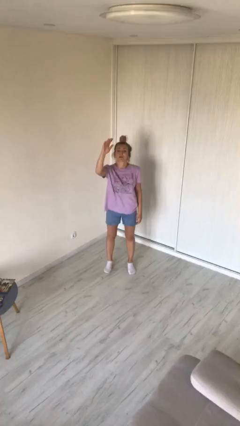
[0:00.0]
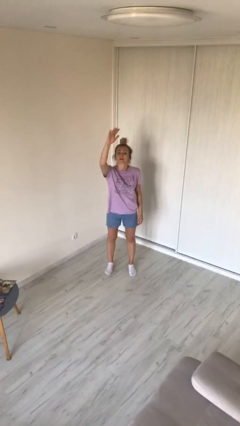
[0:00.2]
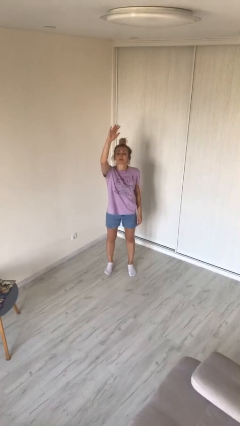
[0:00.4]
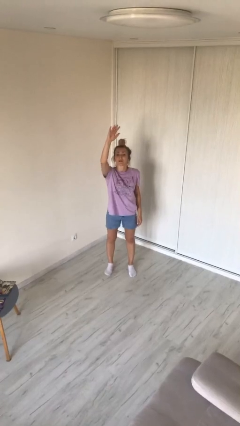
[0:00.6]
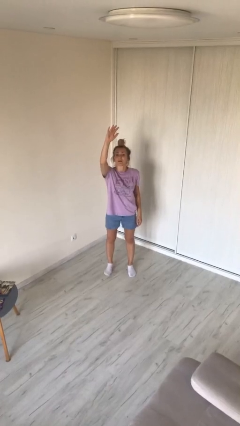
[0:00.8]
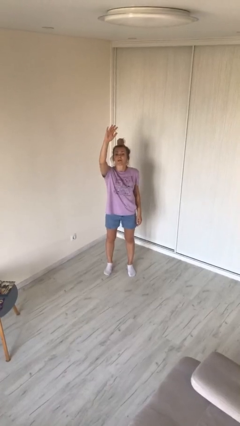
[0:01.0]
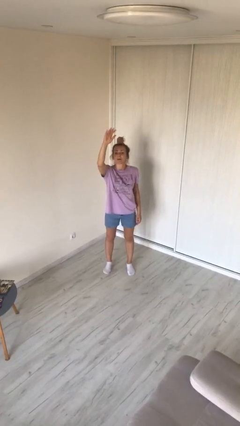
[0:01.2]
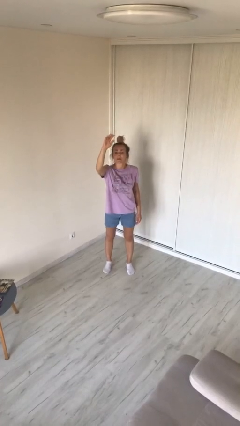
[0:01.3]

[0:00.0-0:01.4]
person gestures raise hand

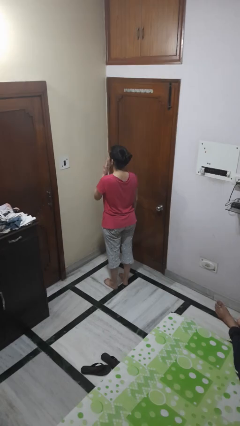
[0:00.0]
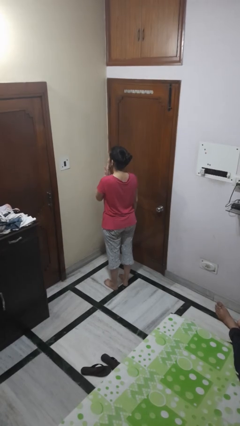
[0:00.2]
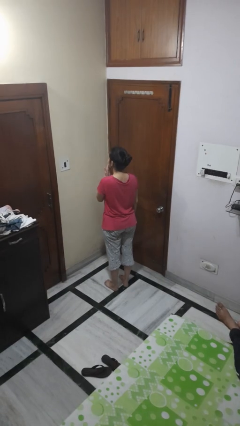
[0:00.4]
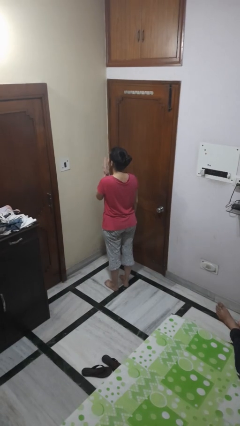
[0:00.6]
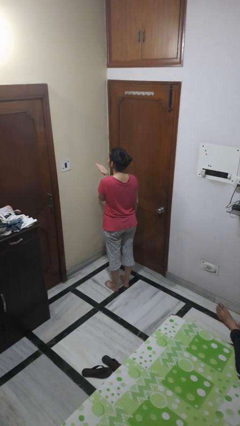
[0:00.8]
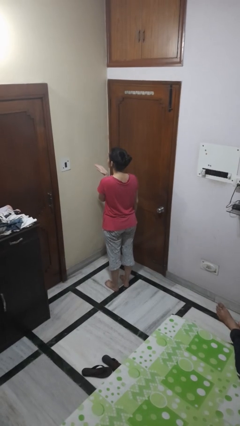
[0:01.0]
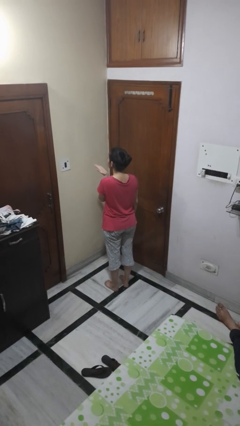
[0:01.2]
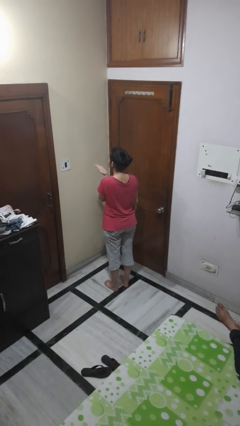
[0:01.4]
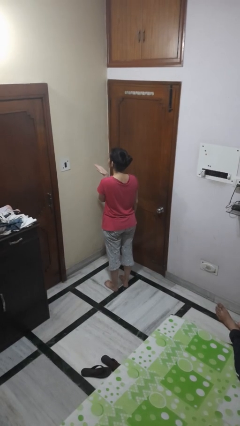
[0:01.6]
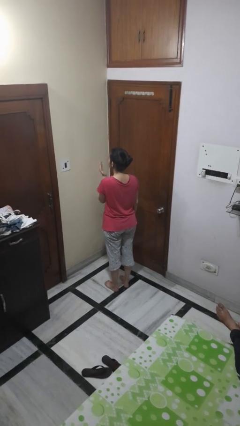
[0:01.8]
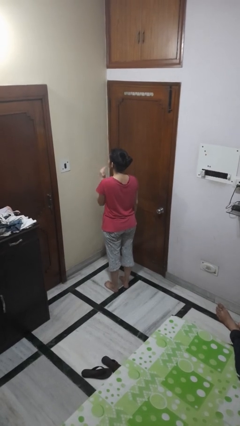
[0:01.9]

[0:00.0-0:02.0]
person gestures blow kiss

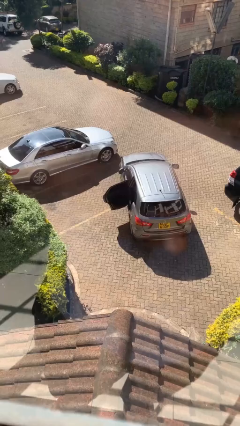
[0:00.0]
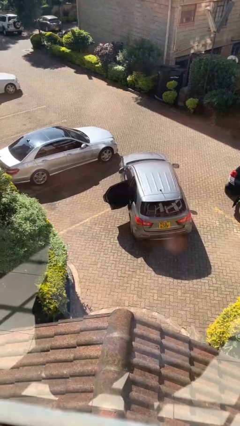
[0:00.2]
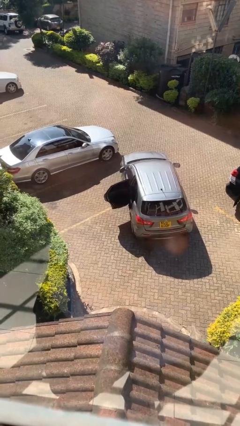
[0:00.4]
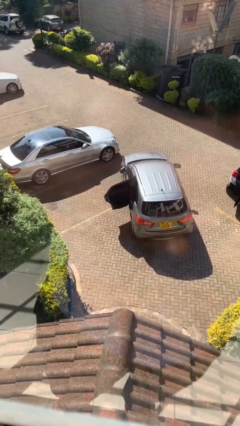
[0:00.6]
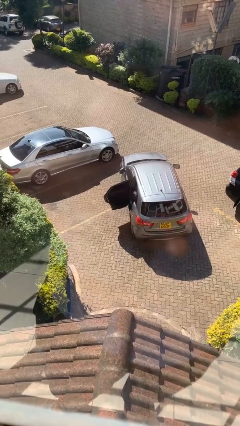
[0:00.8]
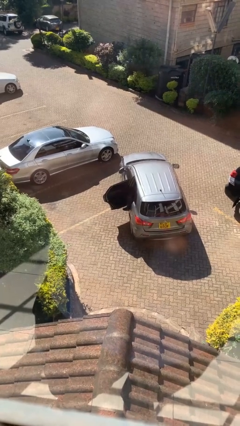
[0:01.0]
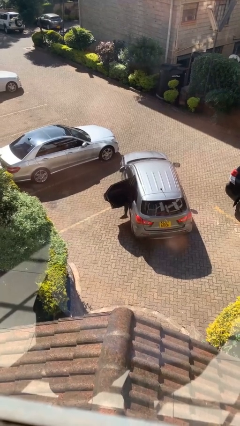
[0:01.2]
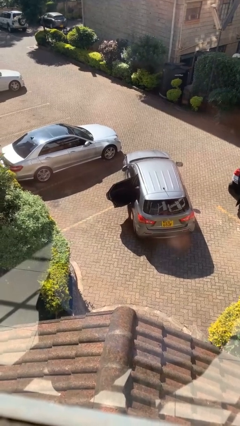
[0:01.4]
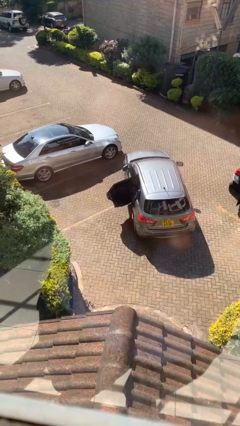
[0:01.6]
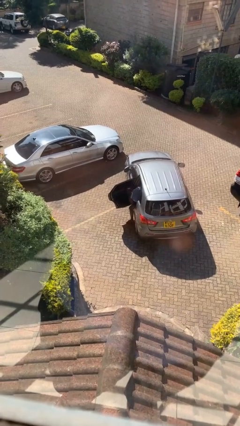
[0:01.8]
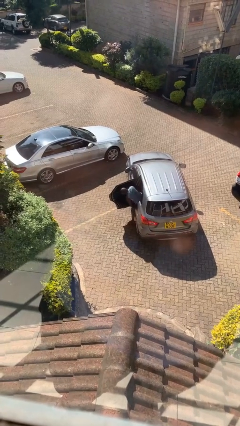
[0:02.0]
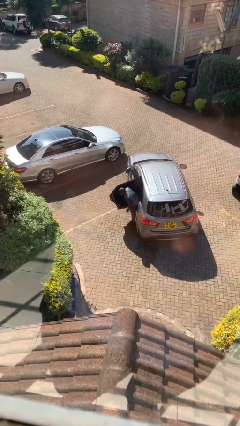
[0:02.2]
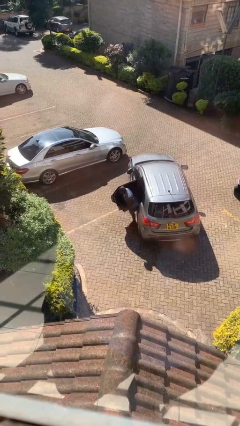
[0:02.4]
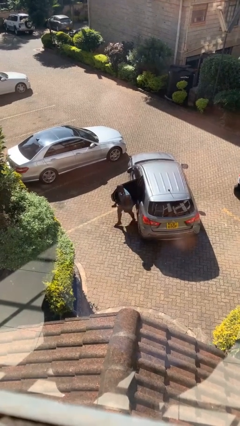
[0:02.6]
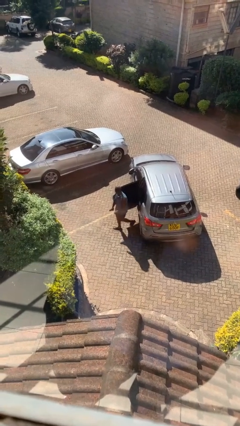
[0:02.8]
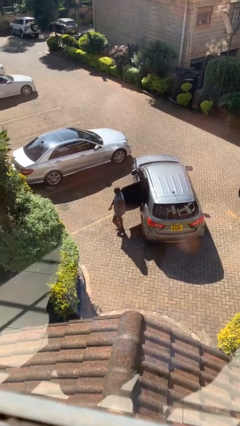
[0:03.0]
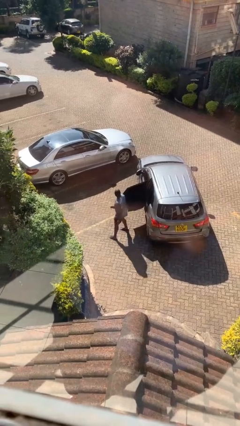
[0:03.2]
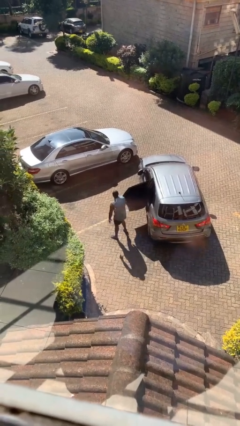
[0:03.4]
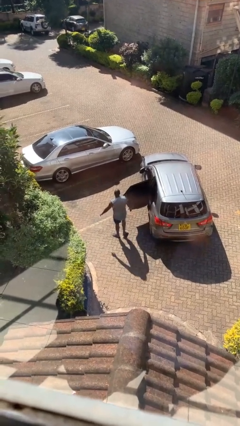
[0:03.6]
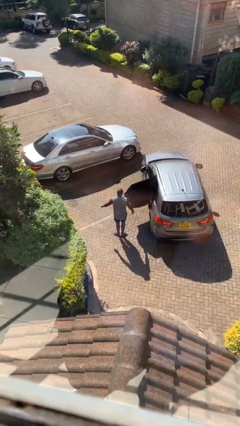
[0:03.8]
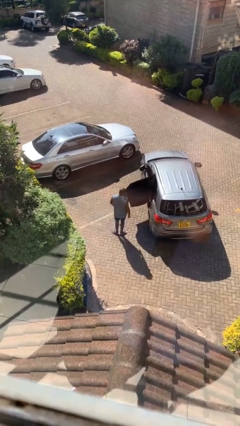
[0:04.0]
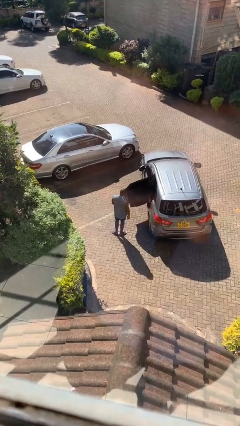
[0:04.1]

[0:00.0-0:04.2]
person exits car

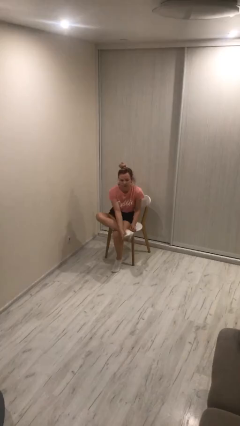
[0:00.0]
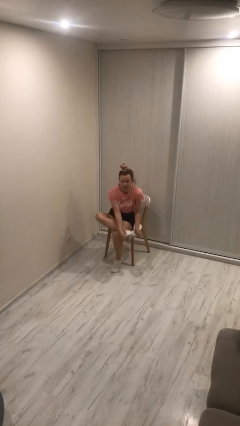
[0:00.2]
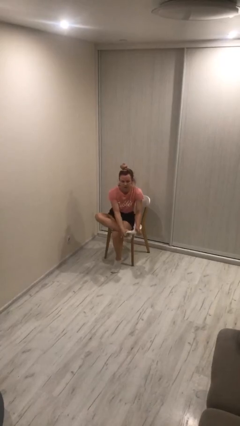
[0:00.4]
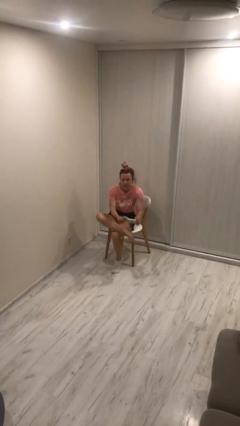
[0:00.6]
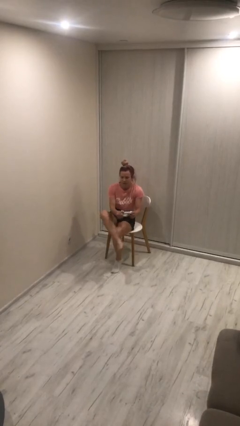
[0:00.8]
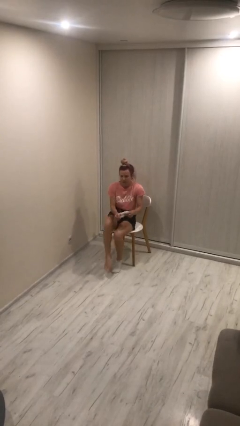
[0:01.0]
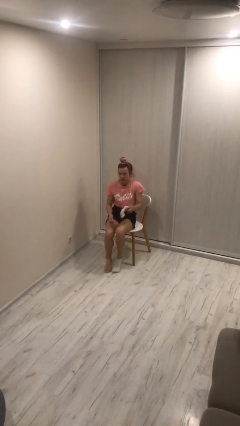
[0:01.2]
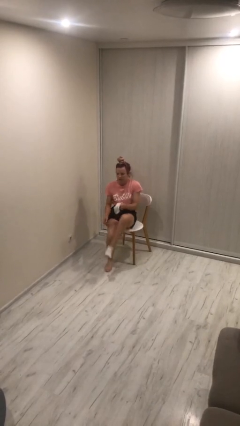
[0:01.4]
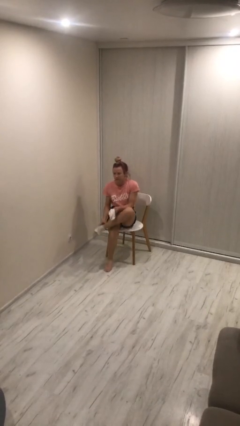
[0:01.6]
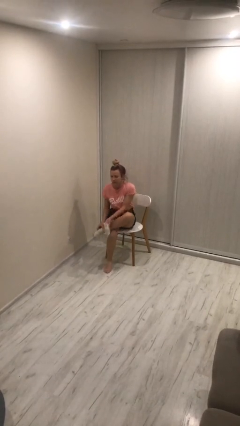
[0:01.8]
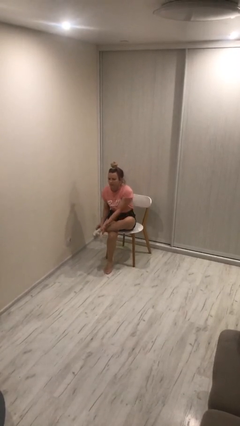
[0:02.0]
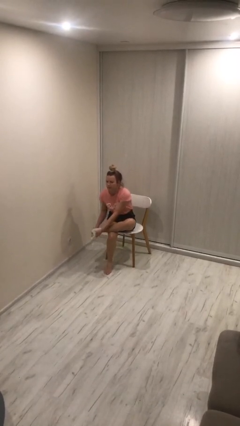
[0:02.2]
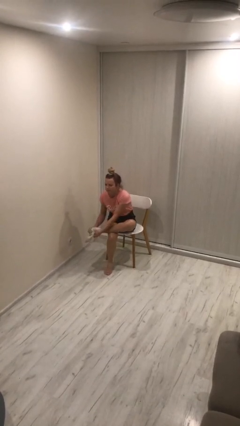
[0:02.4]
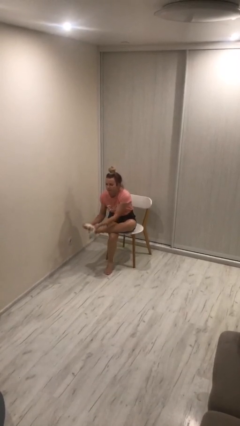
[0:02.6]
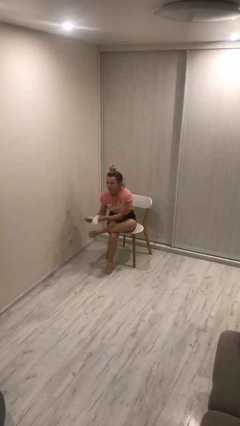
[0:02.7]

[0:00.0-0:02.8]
person takes off socks

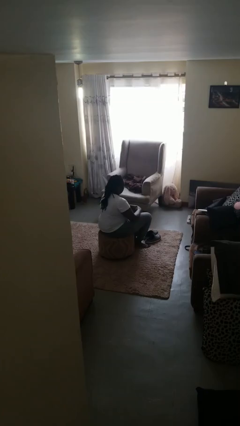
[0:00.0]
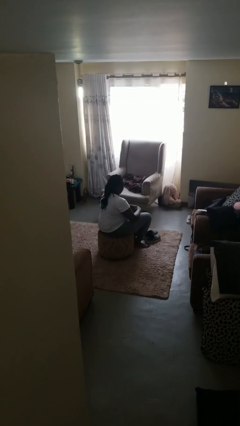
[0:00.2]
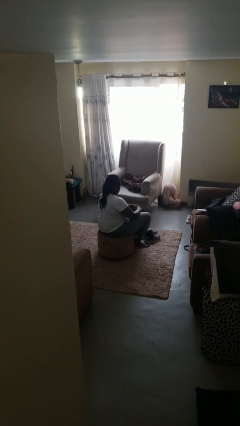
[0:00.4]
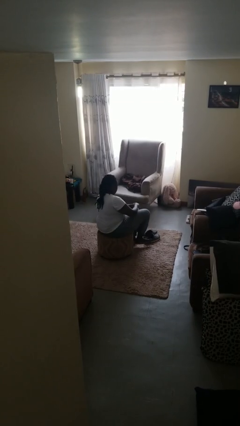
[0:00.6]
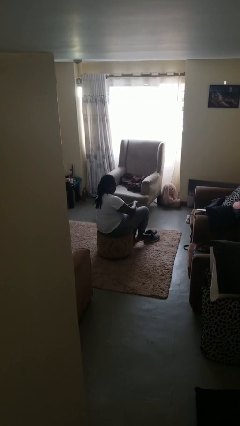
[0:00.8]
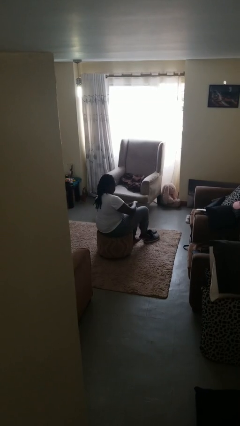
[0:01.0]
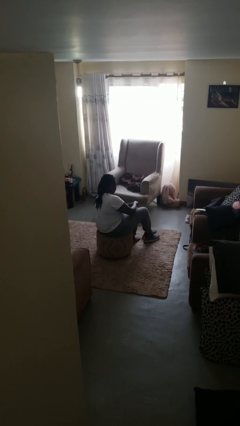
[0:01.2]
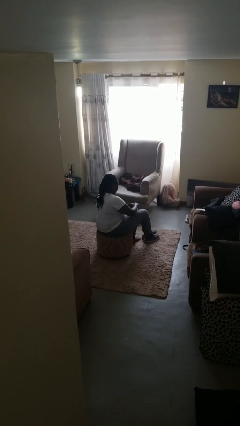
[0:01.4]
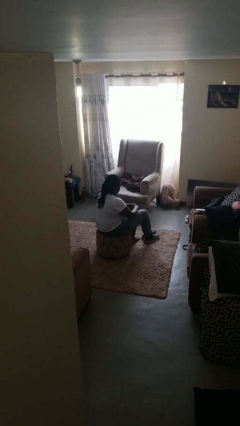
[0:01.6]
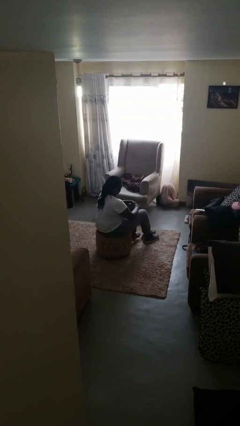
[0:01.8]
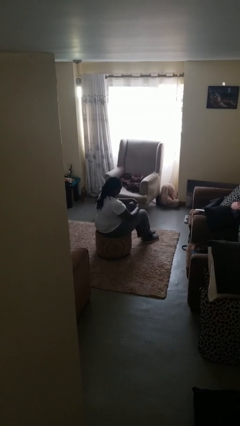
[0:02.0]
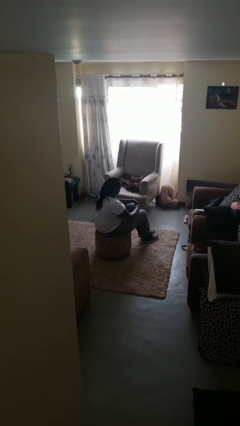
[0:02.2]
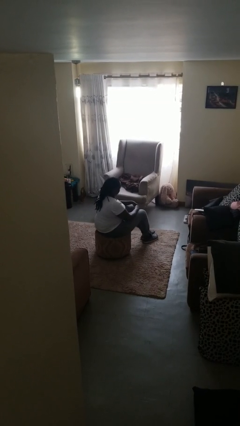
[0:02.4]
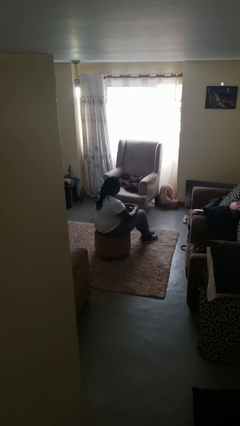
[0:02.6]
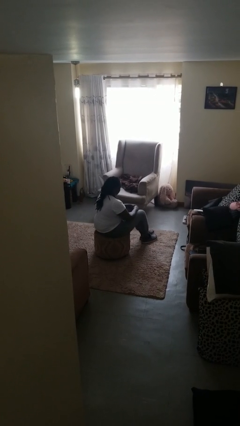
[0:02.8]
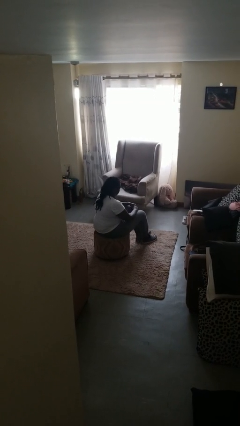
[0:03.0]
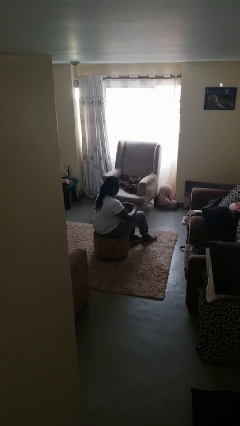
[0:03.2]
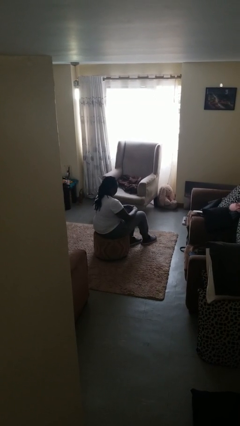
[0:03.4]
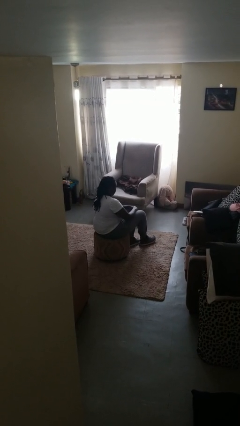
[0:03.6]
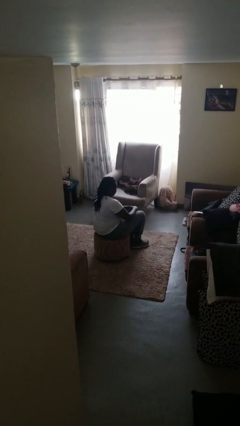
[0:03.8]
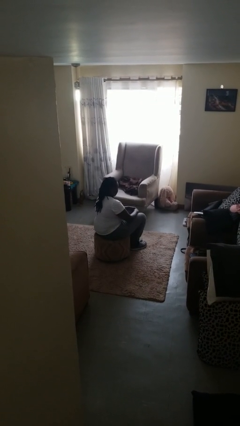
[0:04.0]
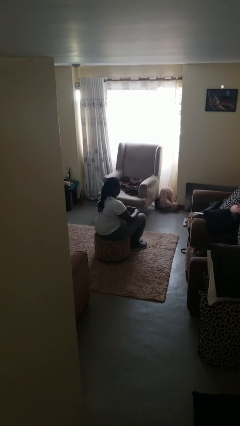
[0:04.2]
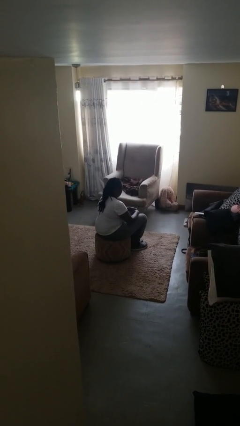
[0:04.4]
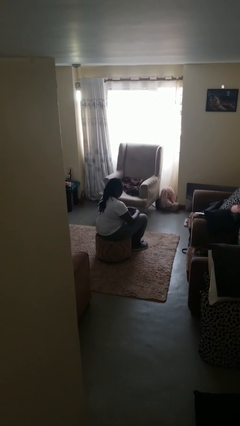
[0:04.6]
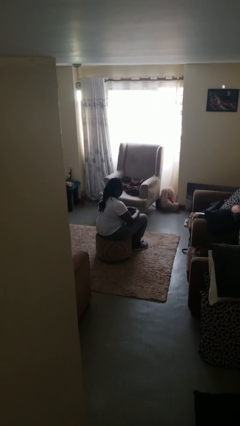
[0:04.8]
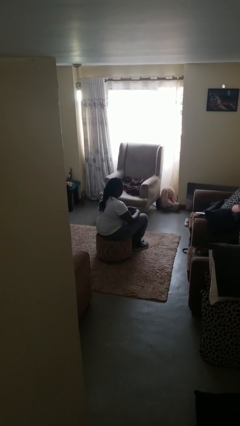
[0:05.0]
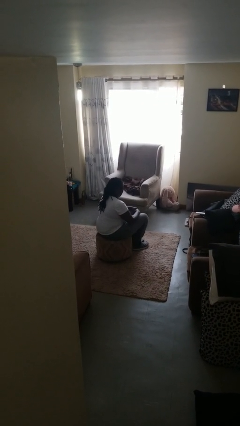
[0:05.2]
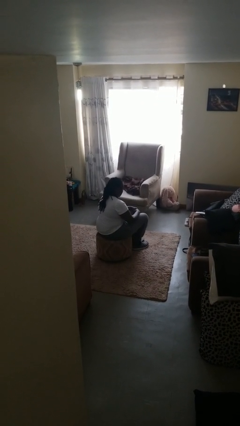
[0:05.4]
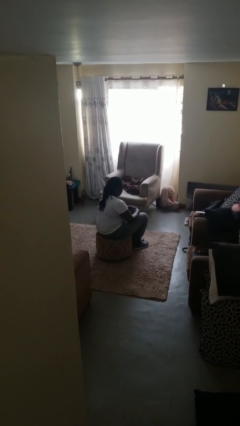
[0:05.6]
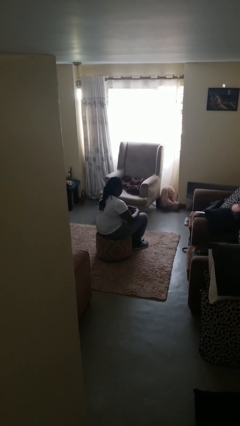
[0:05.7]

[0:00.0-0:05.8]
person puts on shoes

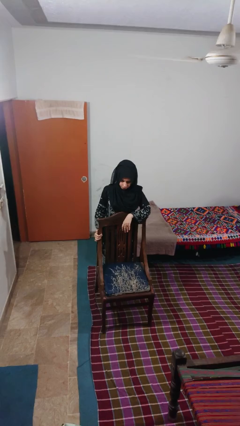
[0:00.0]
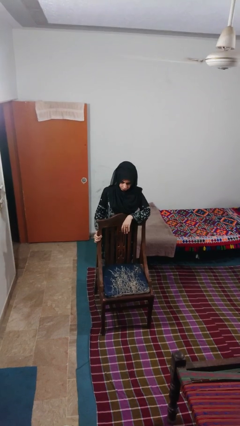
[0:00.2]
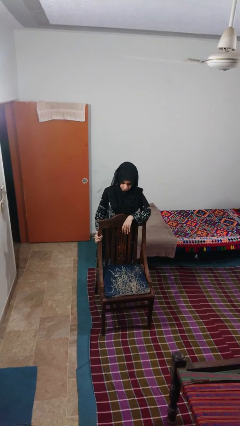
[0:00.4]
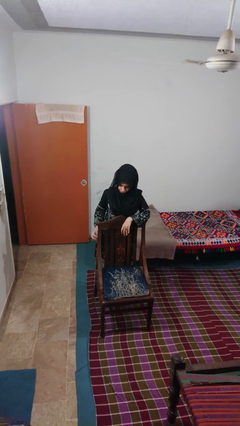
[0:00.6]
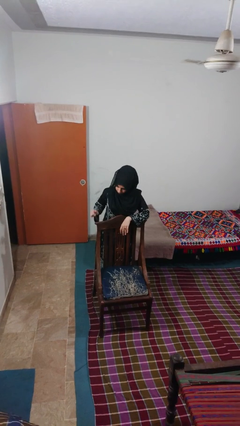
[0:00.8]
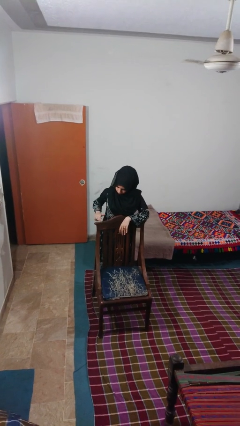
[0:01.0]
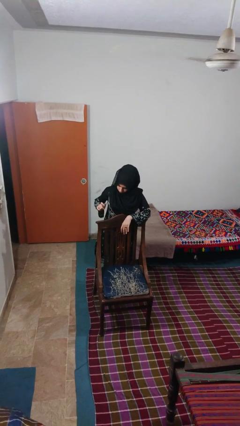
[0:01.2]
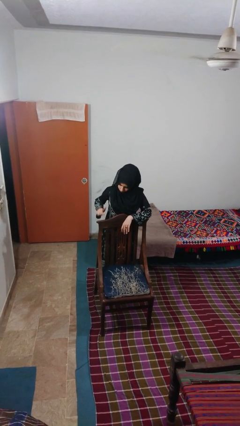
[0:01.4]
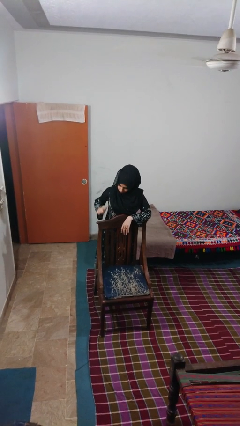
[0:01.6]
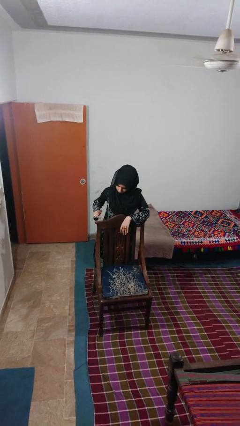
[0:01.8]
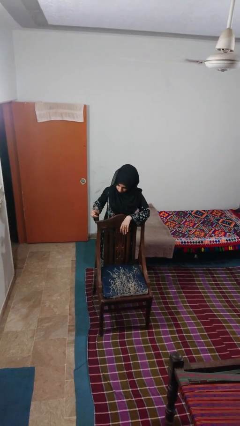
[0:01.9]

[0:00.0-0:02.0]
person taps object with finger
